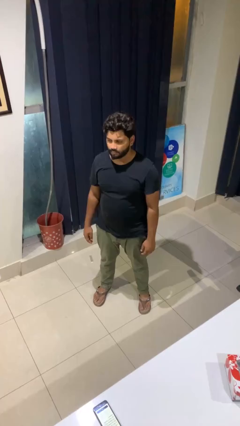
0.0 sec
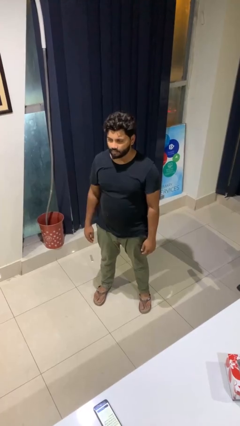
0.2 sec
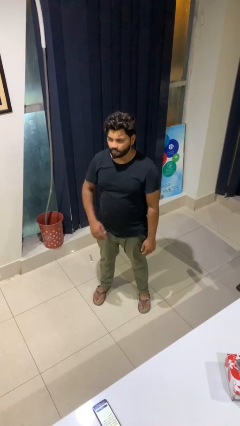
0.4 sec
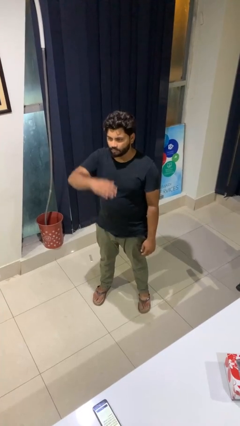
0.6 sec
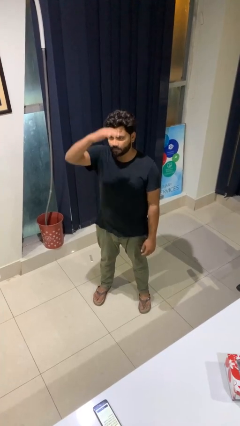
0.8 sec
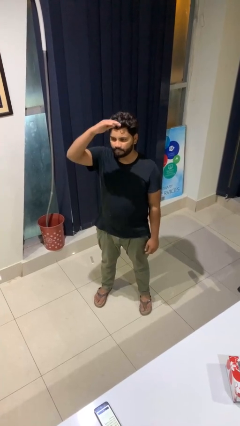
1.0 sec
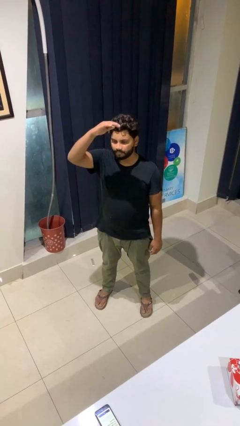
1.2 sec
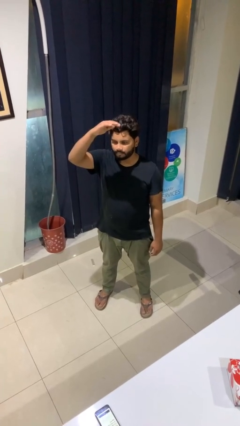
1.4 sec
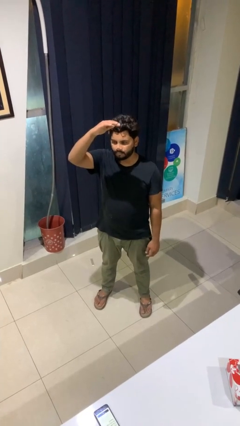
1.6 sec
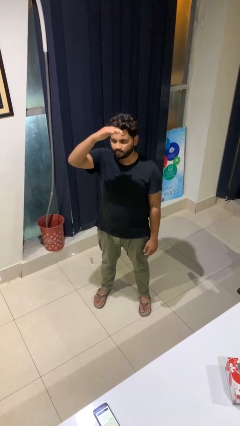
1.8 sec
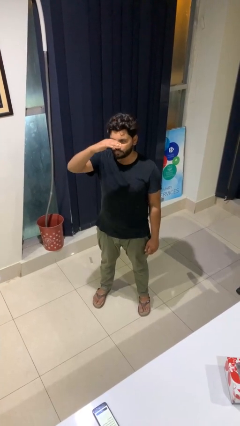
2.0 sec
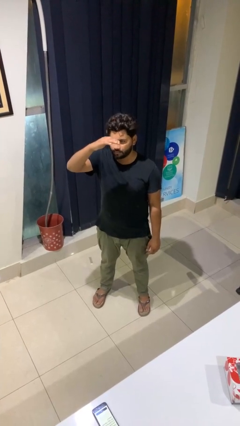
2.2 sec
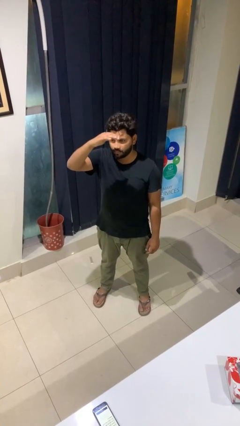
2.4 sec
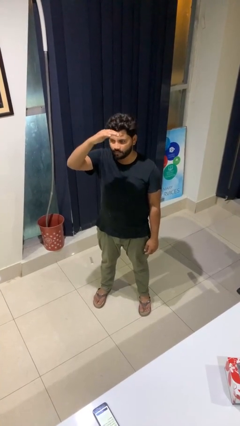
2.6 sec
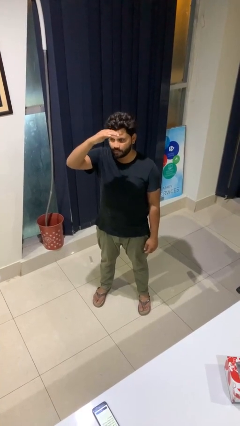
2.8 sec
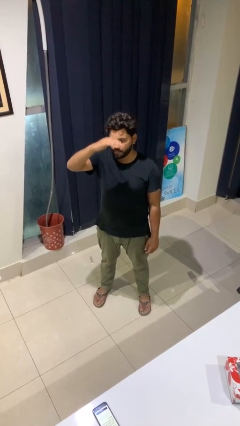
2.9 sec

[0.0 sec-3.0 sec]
person gestures swipe up

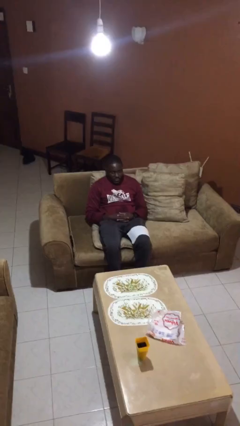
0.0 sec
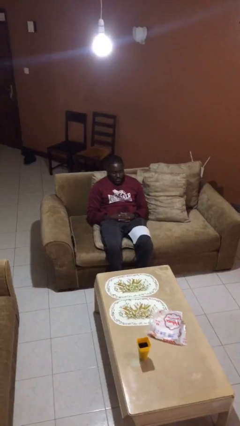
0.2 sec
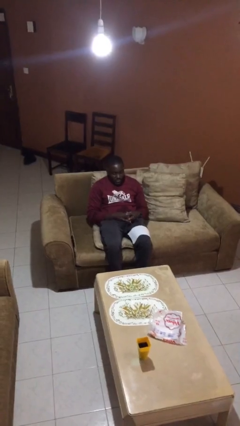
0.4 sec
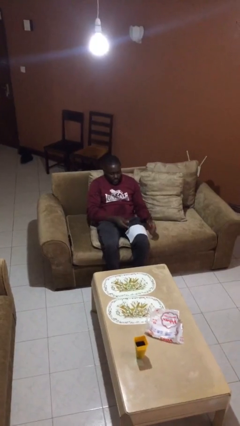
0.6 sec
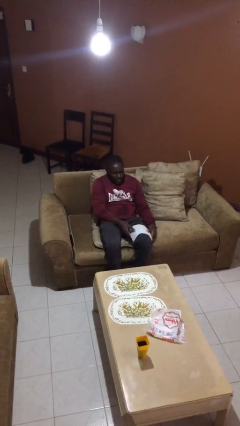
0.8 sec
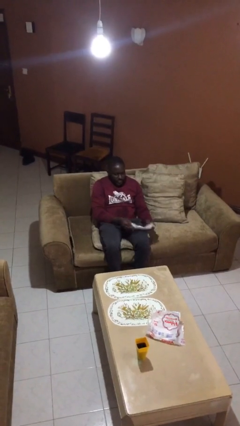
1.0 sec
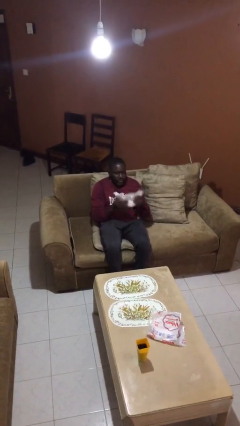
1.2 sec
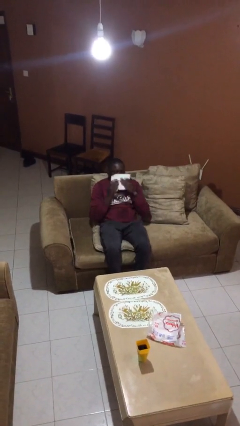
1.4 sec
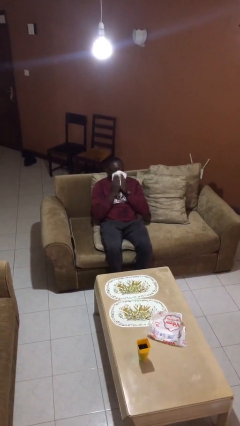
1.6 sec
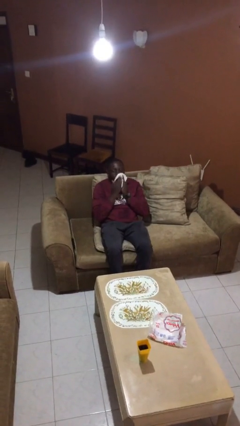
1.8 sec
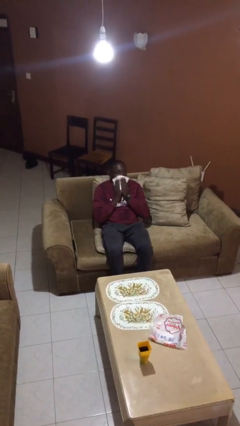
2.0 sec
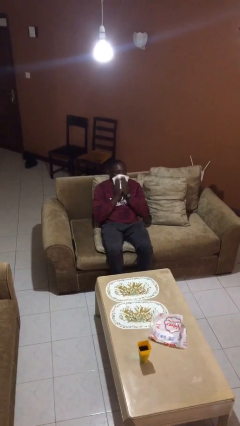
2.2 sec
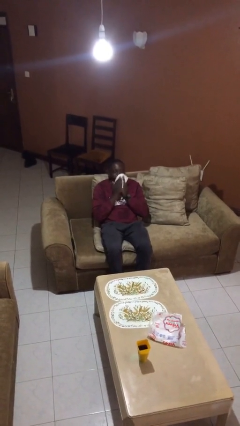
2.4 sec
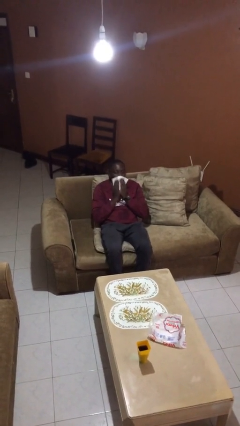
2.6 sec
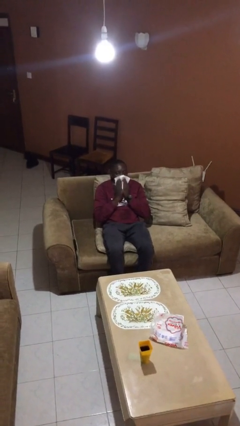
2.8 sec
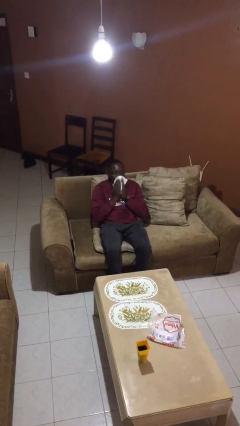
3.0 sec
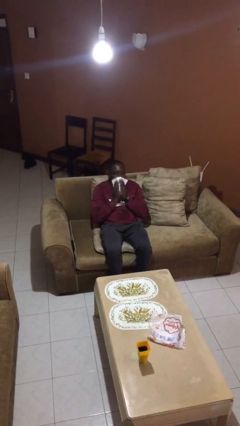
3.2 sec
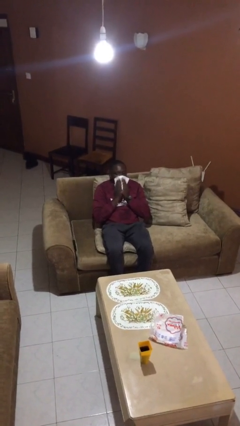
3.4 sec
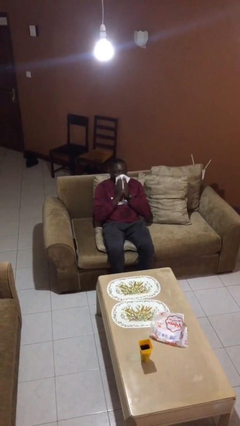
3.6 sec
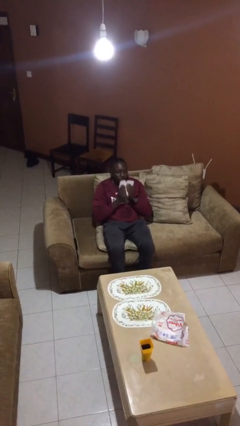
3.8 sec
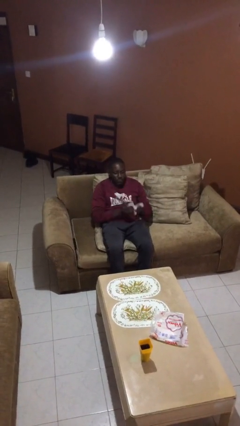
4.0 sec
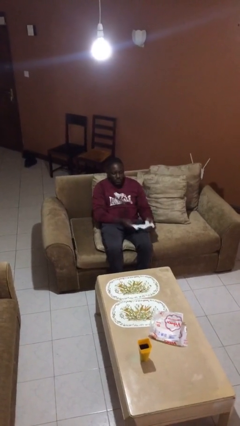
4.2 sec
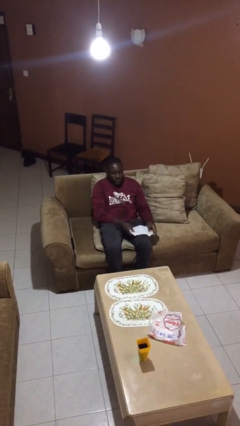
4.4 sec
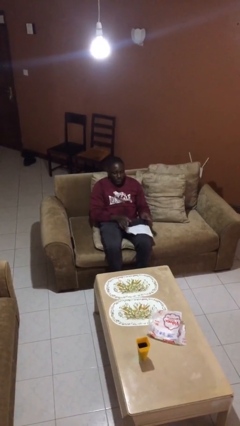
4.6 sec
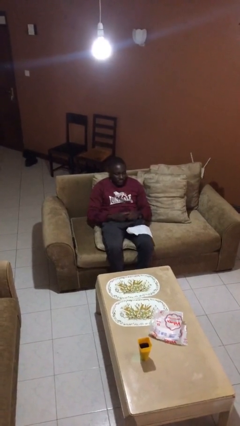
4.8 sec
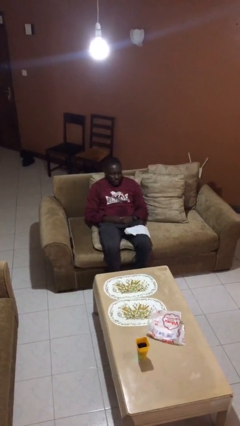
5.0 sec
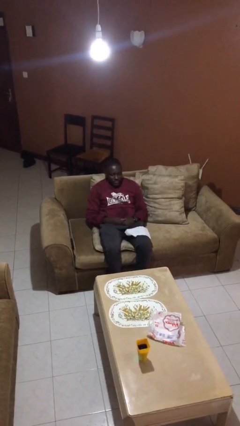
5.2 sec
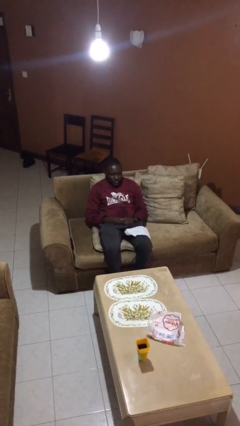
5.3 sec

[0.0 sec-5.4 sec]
person wipes mouth with napkin

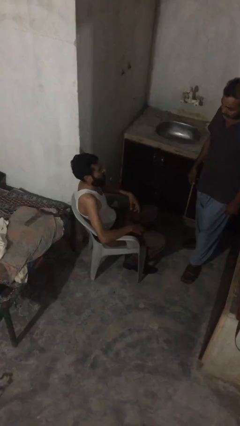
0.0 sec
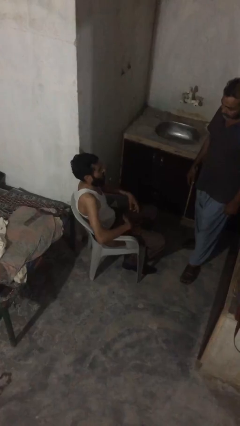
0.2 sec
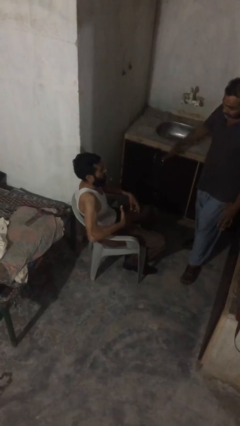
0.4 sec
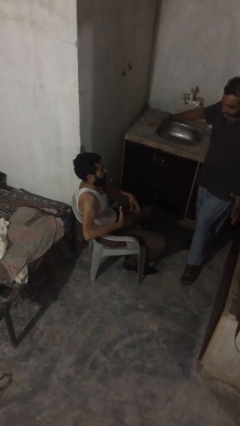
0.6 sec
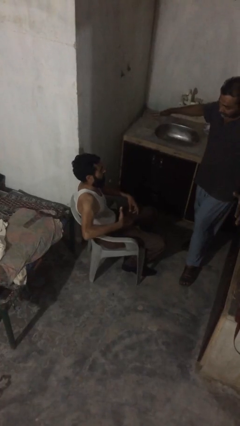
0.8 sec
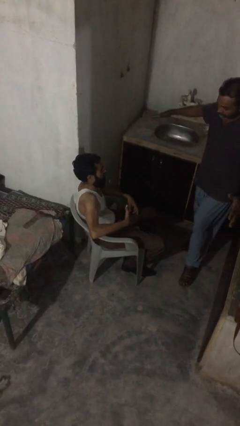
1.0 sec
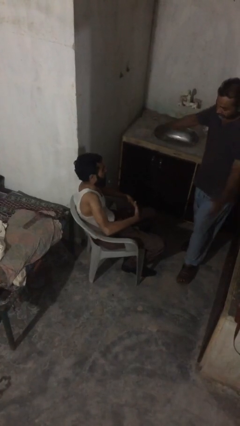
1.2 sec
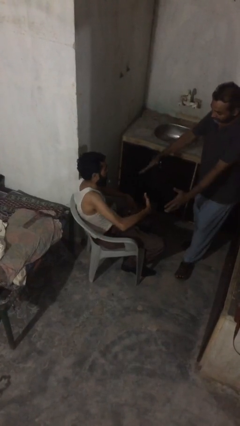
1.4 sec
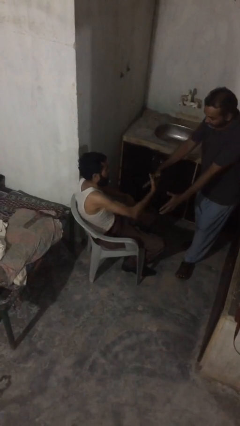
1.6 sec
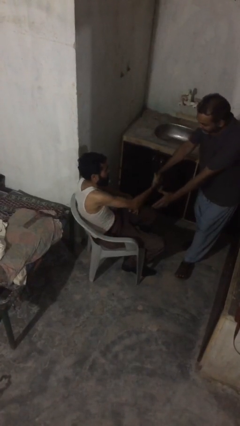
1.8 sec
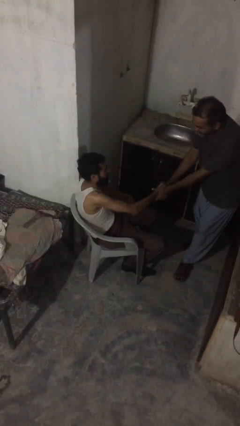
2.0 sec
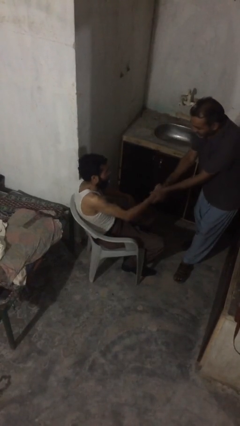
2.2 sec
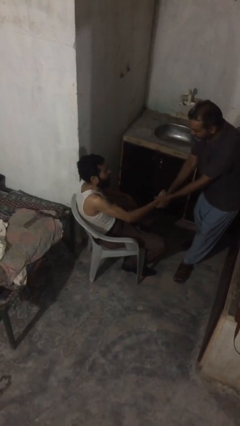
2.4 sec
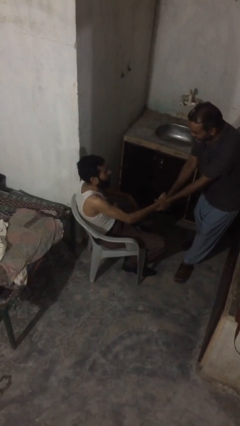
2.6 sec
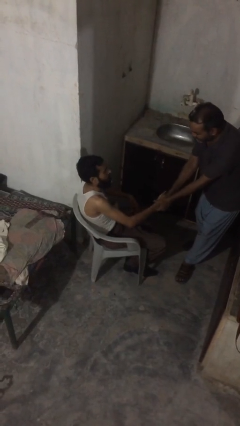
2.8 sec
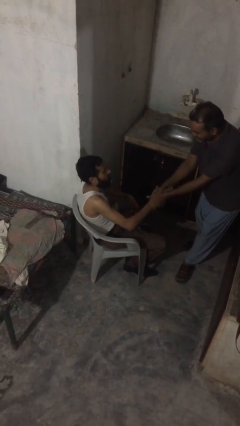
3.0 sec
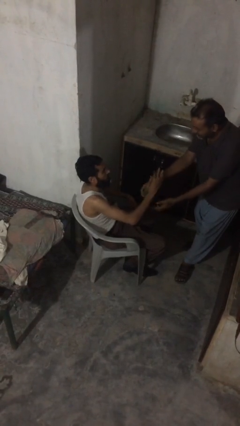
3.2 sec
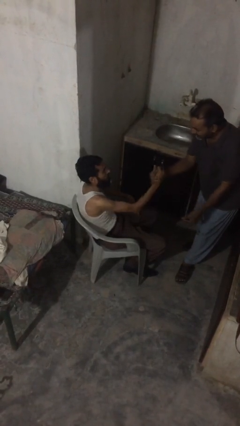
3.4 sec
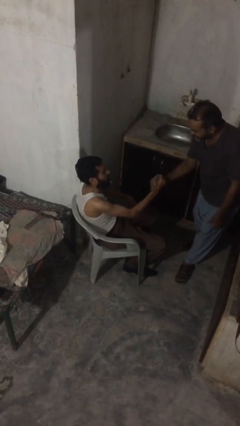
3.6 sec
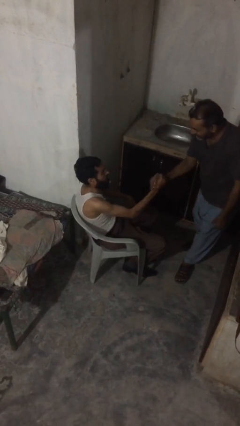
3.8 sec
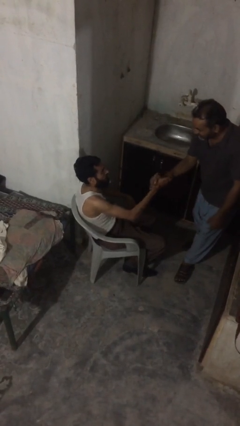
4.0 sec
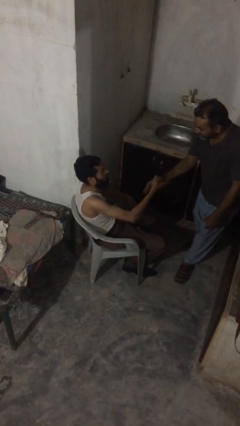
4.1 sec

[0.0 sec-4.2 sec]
person shakes hand

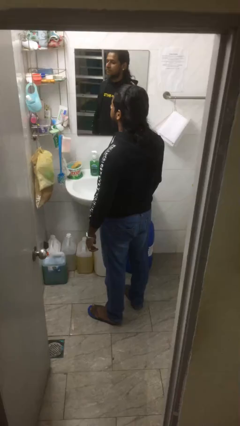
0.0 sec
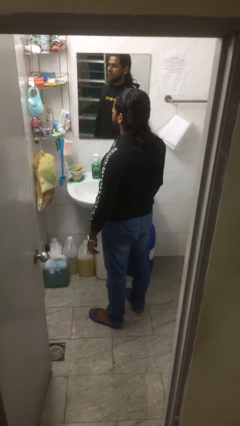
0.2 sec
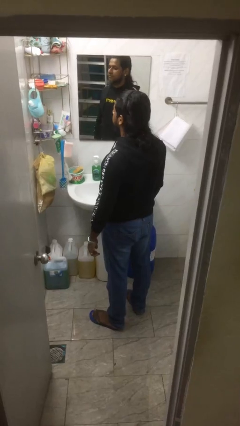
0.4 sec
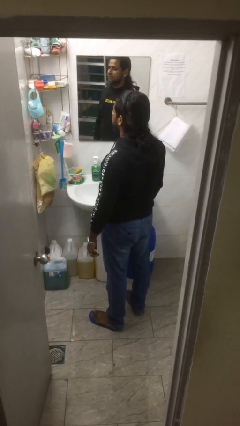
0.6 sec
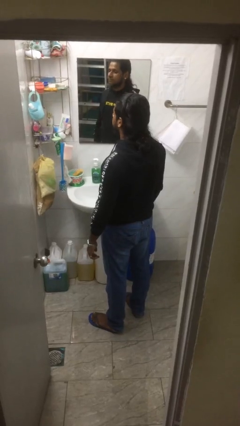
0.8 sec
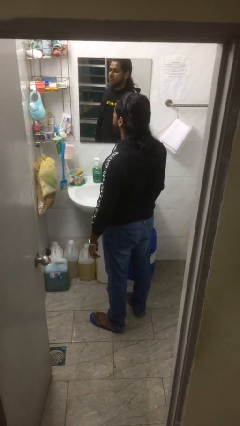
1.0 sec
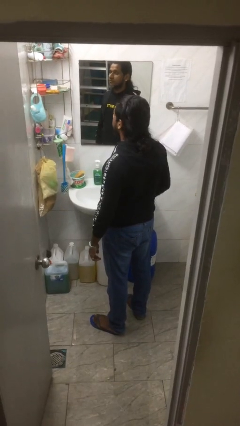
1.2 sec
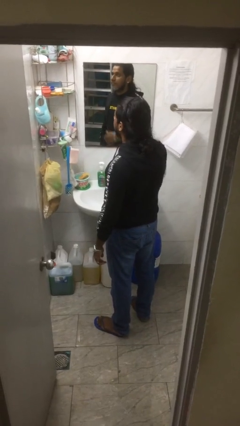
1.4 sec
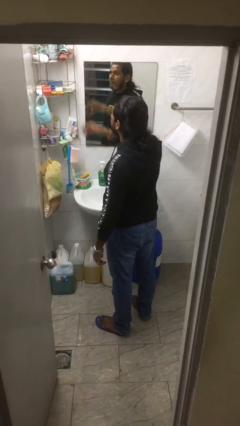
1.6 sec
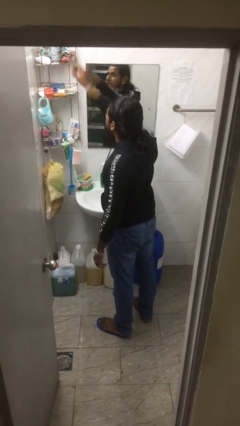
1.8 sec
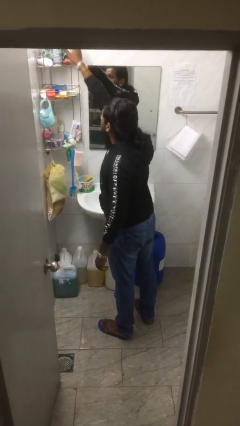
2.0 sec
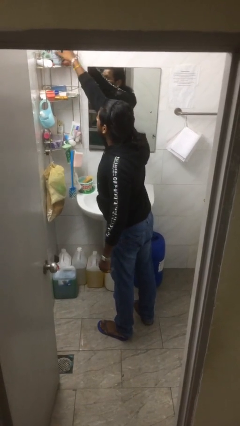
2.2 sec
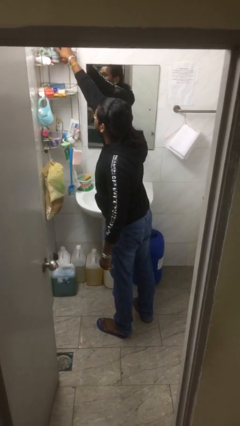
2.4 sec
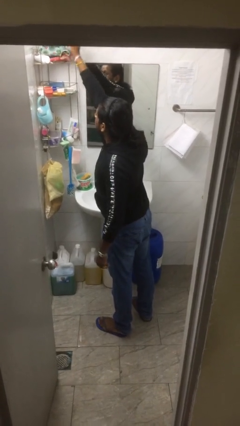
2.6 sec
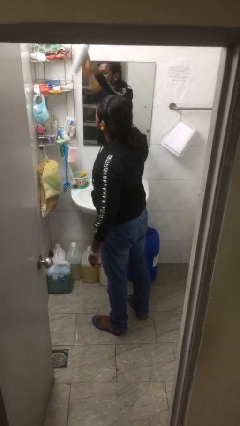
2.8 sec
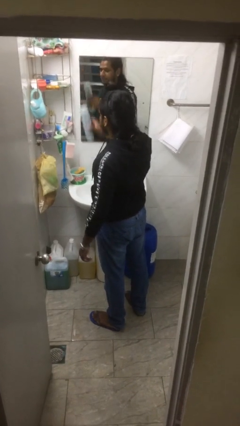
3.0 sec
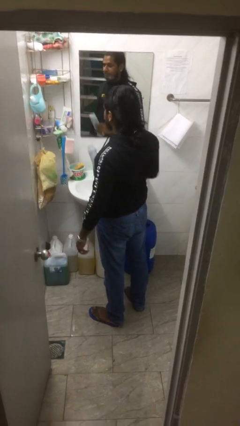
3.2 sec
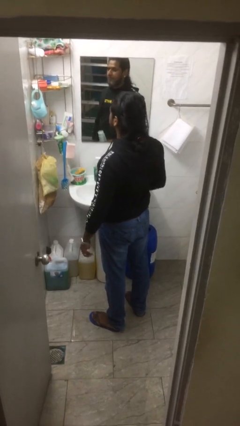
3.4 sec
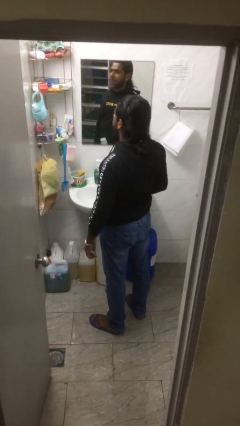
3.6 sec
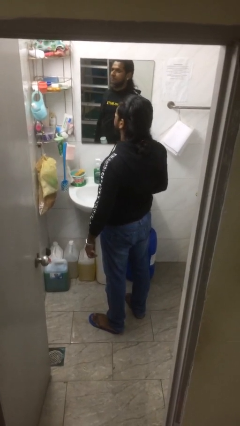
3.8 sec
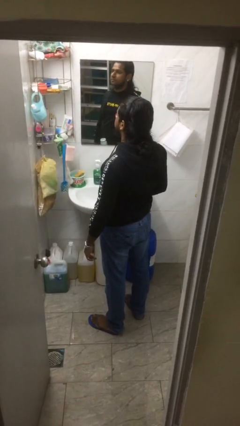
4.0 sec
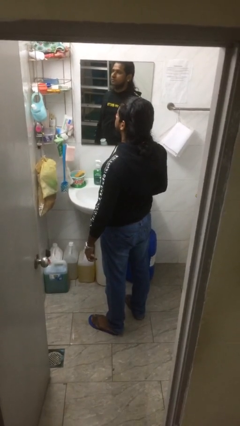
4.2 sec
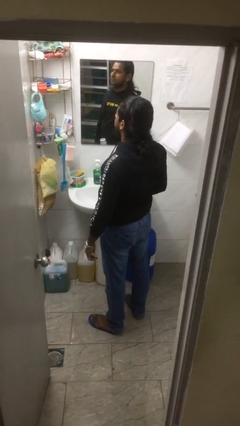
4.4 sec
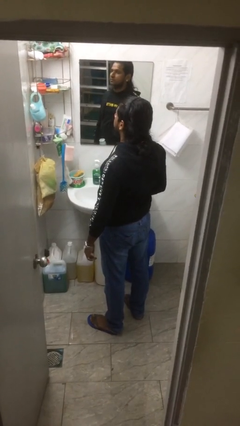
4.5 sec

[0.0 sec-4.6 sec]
person picks up object from countertop

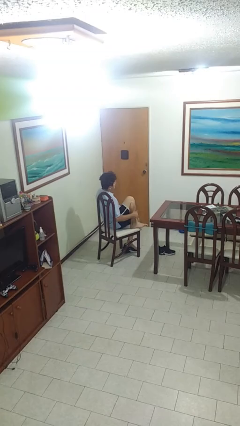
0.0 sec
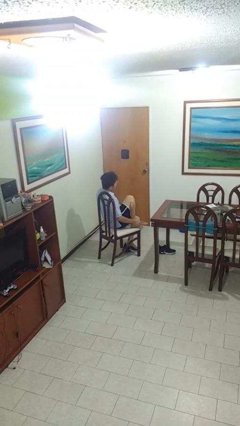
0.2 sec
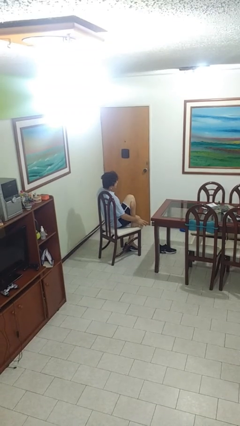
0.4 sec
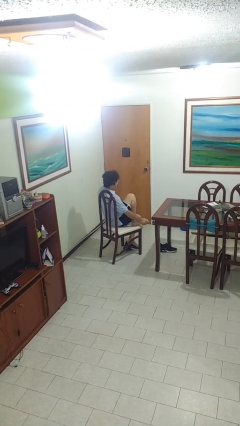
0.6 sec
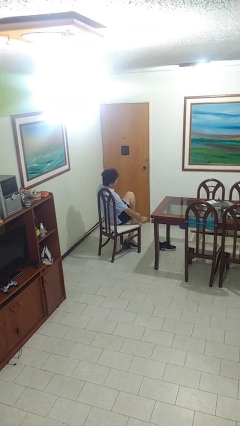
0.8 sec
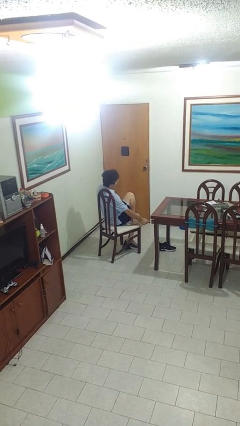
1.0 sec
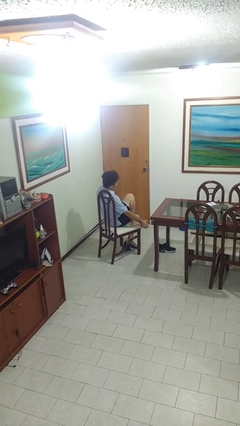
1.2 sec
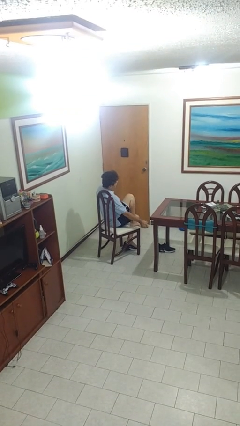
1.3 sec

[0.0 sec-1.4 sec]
person rubs foot
